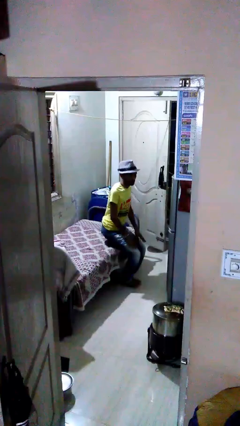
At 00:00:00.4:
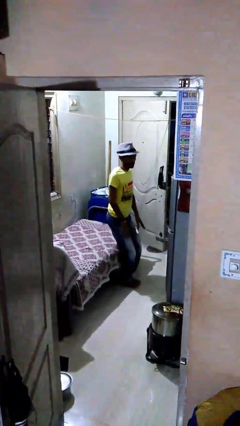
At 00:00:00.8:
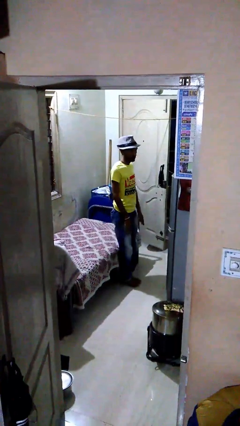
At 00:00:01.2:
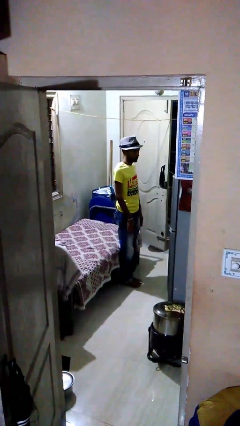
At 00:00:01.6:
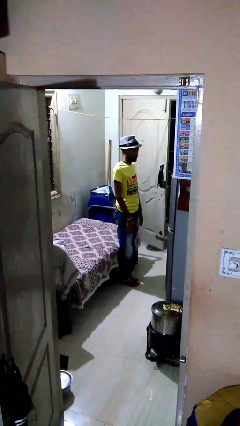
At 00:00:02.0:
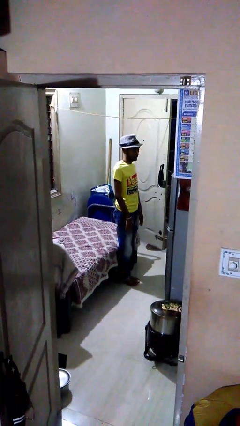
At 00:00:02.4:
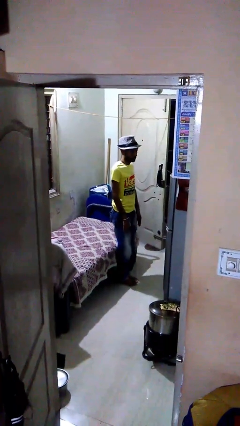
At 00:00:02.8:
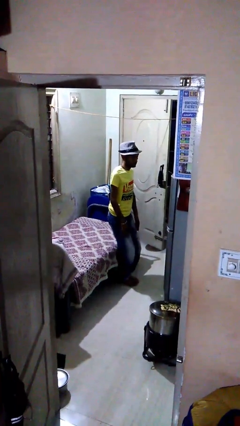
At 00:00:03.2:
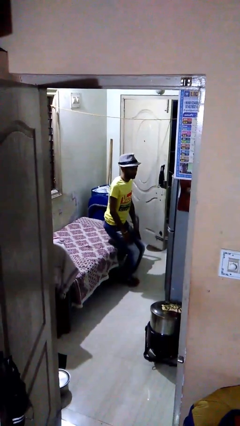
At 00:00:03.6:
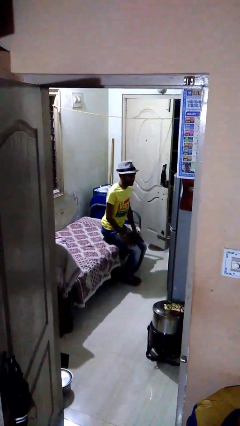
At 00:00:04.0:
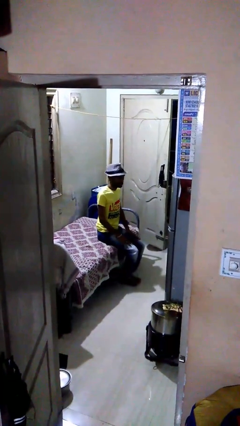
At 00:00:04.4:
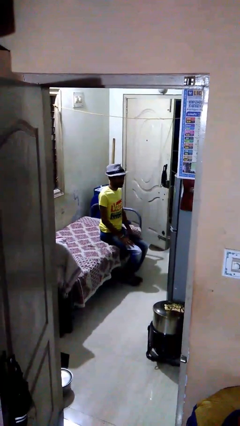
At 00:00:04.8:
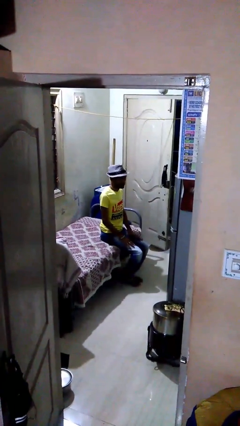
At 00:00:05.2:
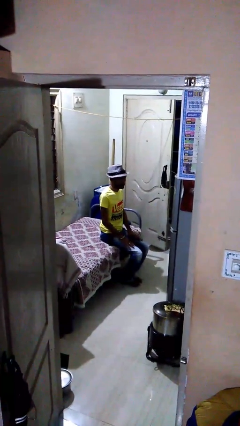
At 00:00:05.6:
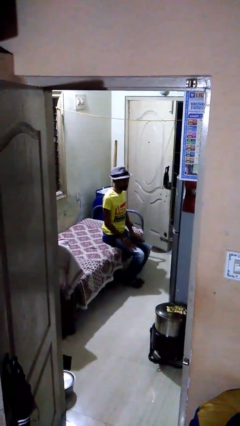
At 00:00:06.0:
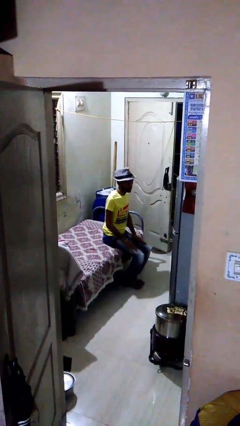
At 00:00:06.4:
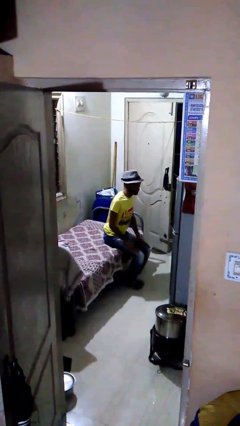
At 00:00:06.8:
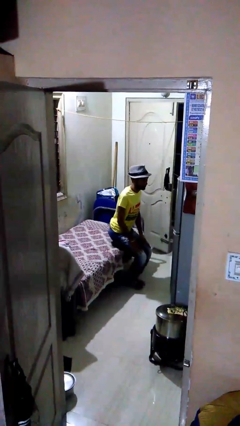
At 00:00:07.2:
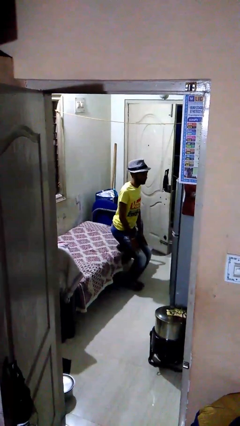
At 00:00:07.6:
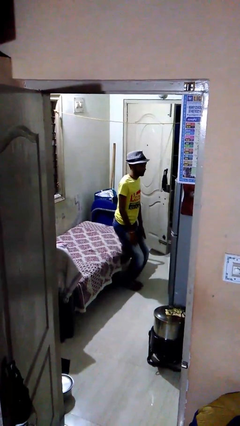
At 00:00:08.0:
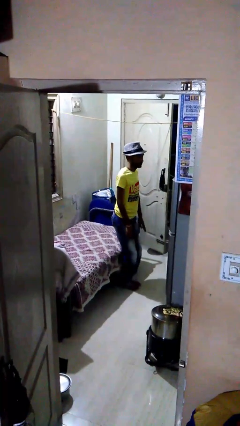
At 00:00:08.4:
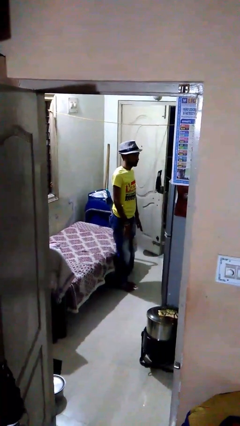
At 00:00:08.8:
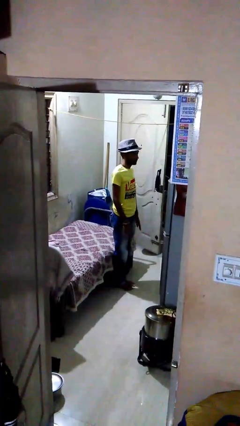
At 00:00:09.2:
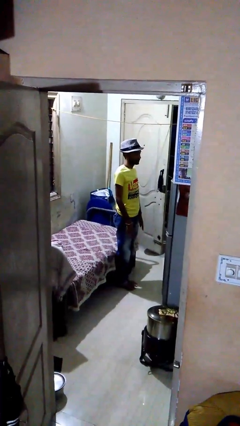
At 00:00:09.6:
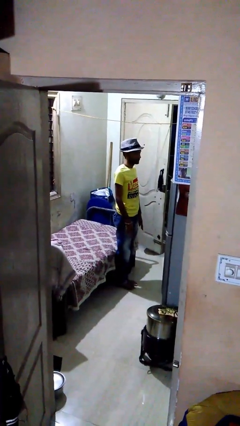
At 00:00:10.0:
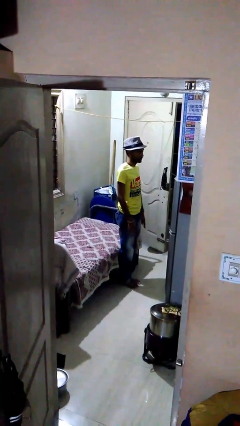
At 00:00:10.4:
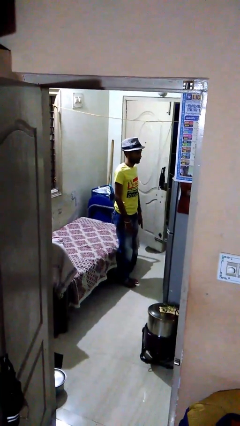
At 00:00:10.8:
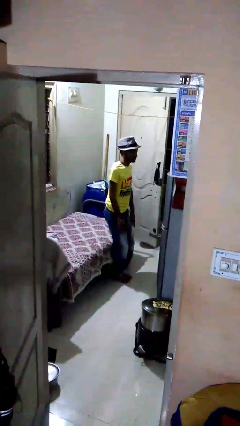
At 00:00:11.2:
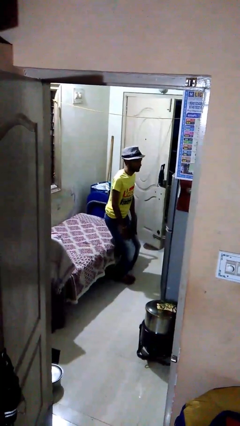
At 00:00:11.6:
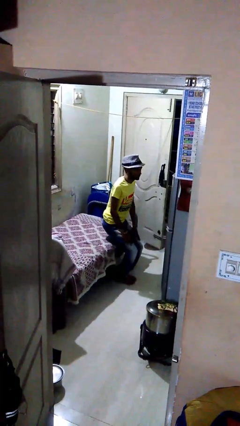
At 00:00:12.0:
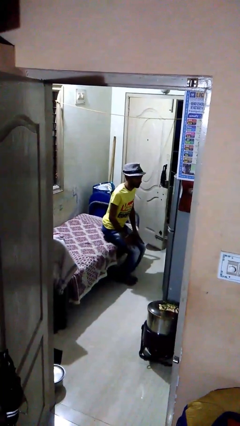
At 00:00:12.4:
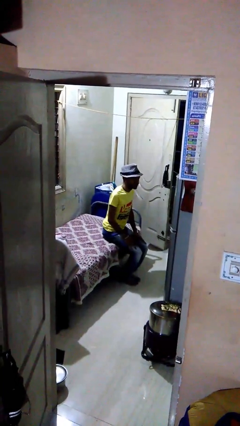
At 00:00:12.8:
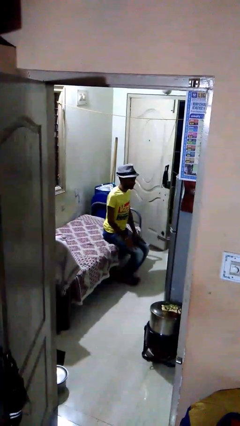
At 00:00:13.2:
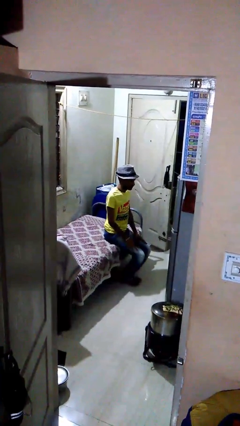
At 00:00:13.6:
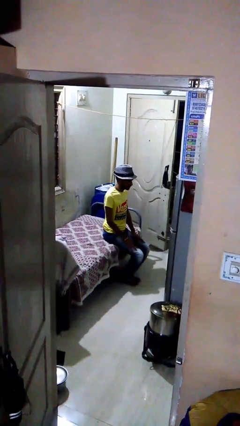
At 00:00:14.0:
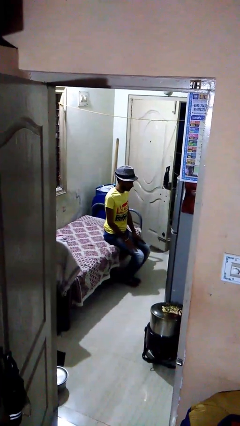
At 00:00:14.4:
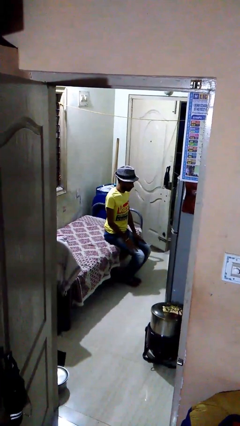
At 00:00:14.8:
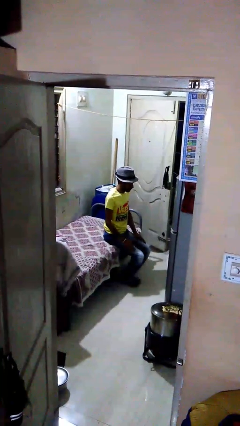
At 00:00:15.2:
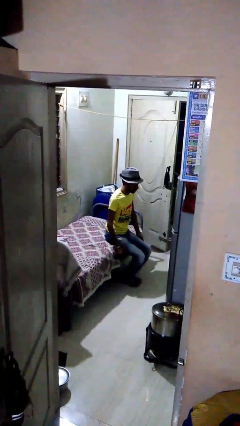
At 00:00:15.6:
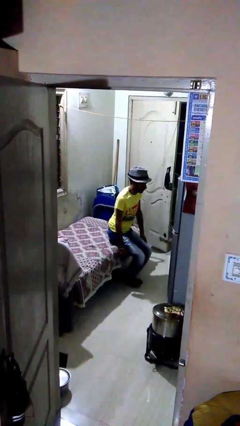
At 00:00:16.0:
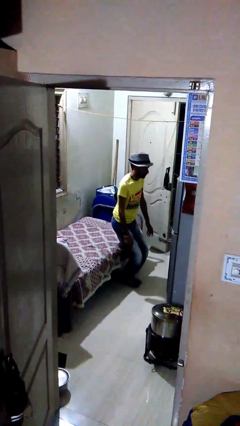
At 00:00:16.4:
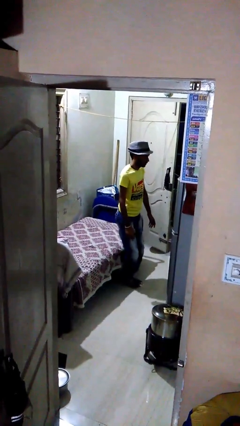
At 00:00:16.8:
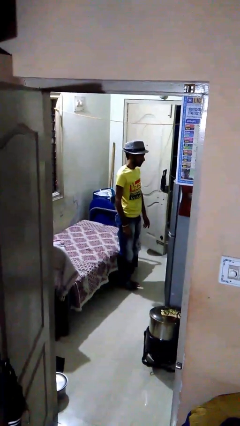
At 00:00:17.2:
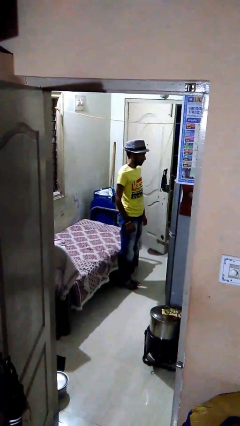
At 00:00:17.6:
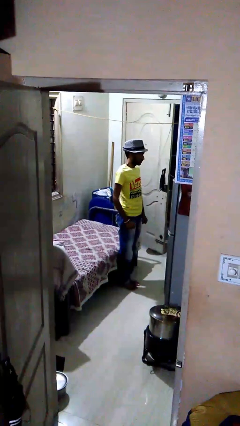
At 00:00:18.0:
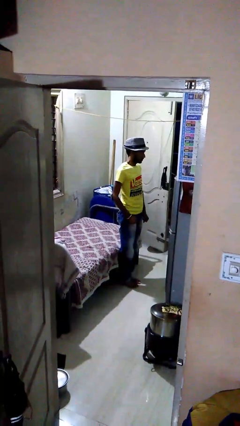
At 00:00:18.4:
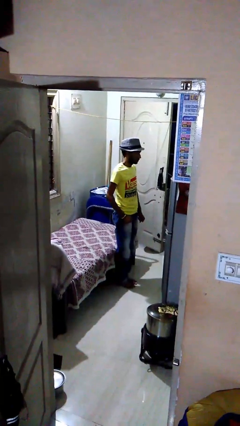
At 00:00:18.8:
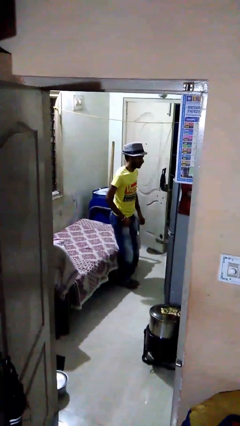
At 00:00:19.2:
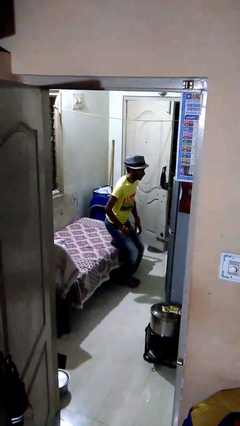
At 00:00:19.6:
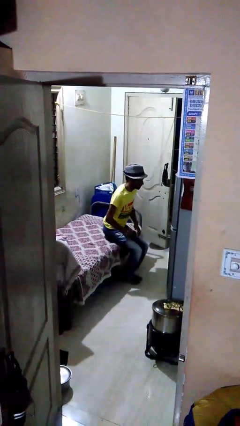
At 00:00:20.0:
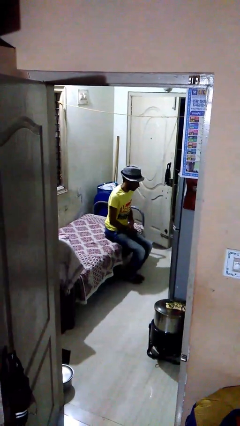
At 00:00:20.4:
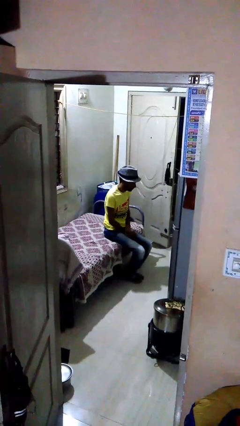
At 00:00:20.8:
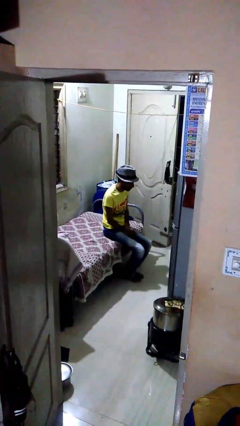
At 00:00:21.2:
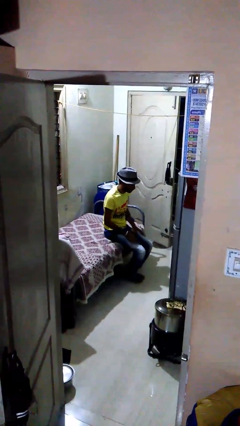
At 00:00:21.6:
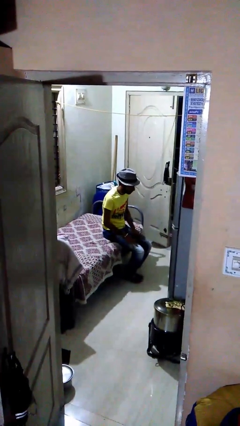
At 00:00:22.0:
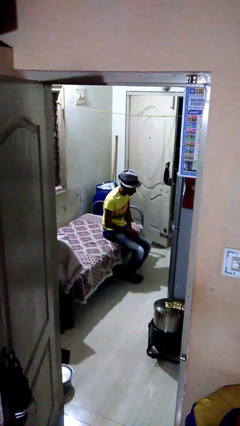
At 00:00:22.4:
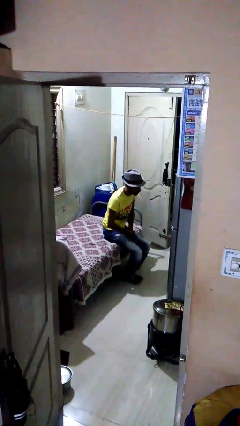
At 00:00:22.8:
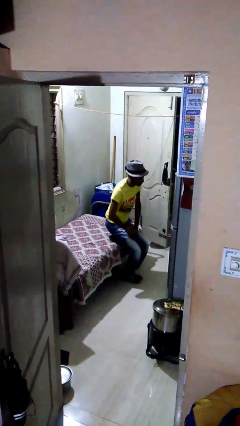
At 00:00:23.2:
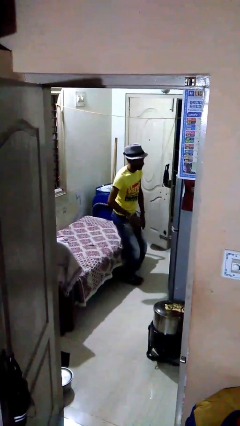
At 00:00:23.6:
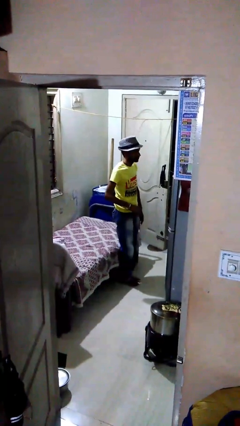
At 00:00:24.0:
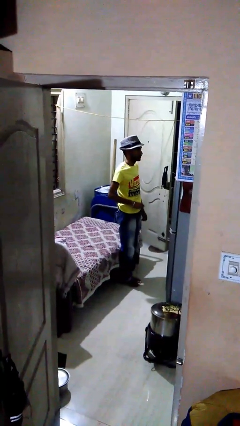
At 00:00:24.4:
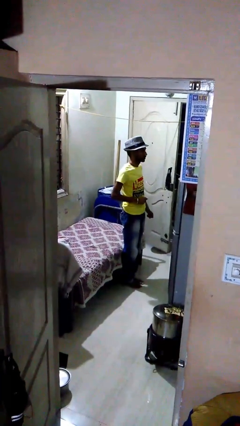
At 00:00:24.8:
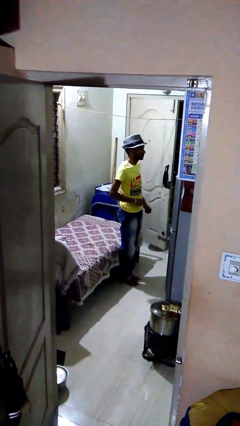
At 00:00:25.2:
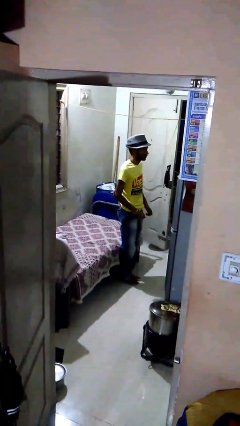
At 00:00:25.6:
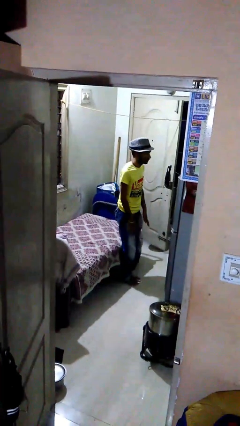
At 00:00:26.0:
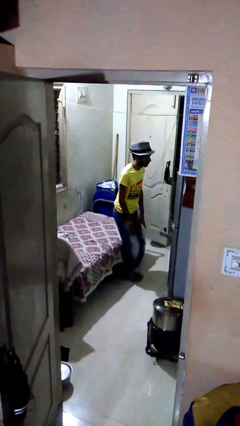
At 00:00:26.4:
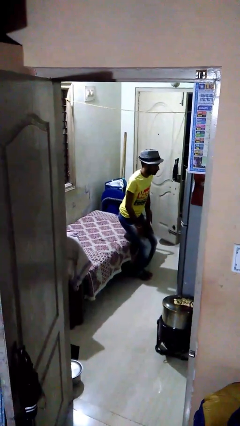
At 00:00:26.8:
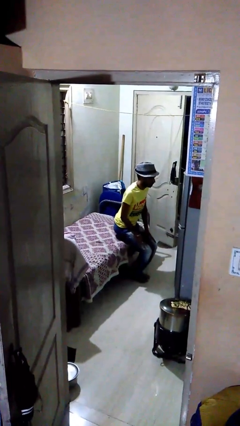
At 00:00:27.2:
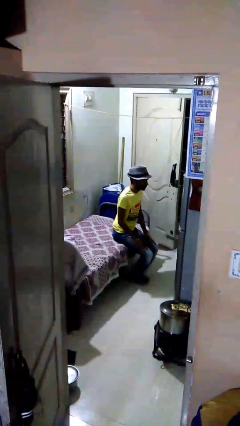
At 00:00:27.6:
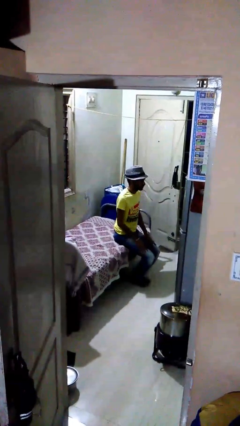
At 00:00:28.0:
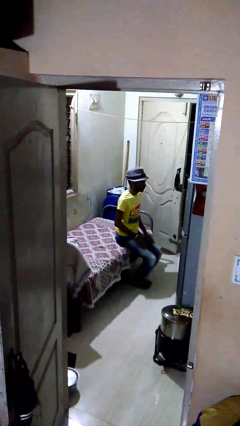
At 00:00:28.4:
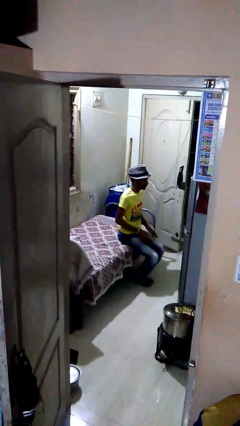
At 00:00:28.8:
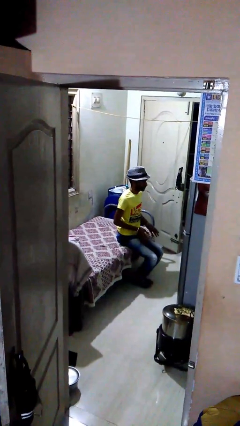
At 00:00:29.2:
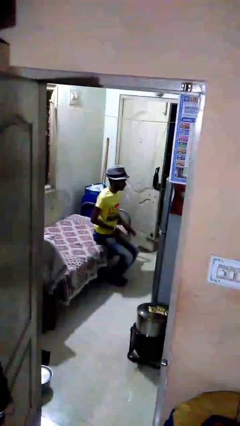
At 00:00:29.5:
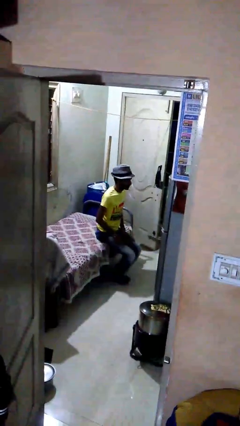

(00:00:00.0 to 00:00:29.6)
person stands up

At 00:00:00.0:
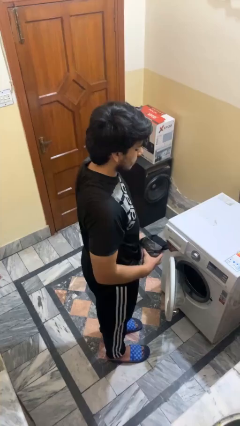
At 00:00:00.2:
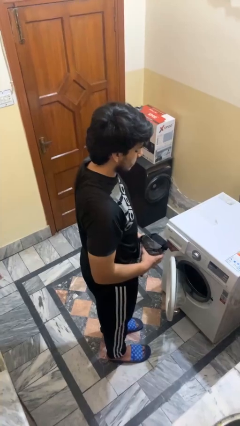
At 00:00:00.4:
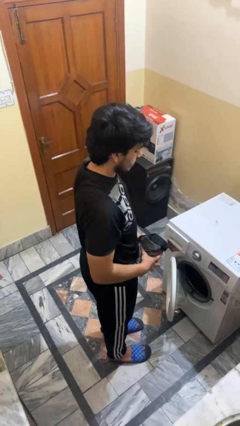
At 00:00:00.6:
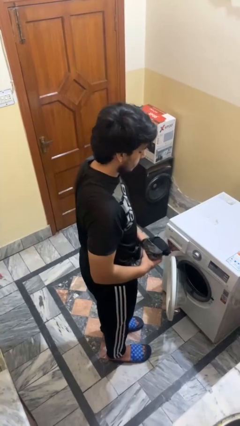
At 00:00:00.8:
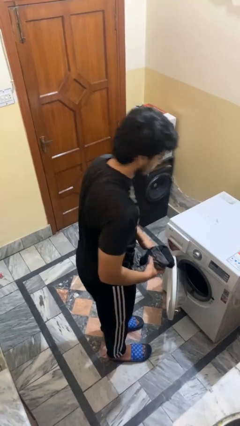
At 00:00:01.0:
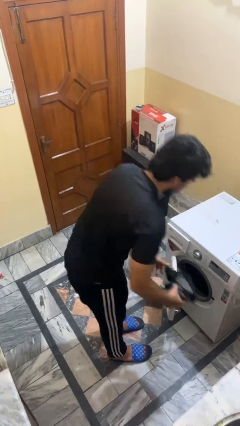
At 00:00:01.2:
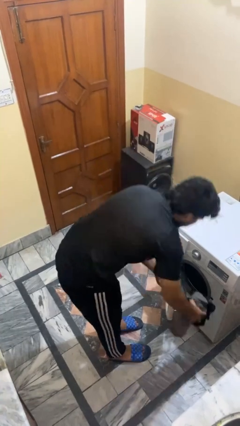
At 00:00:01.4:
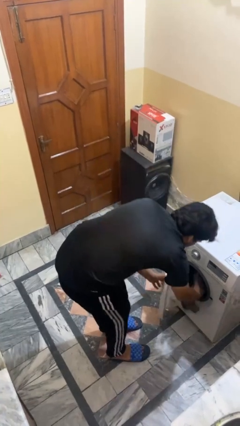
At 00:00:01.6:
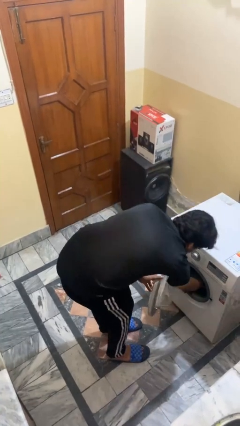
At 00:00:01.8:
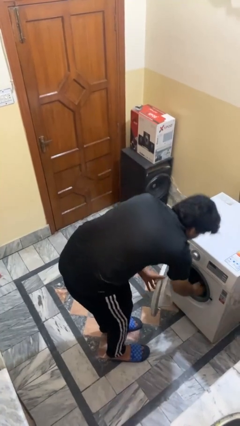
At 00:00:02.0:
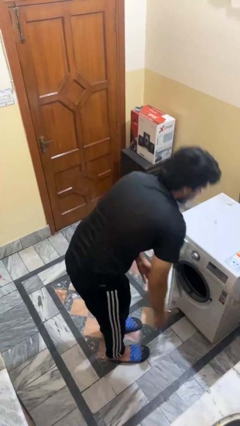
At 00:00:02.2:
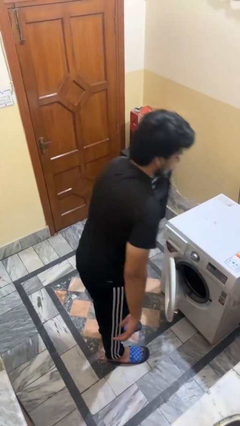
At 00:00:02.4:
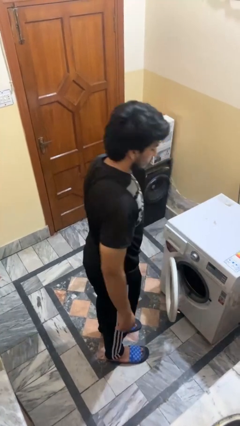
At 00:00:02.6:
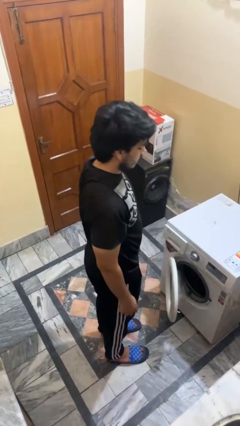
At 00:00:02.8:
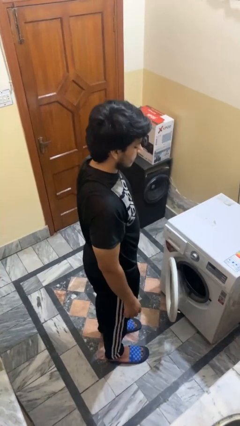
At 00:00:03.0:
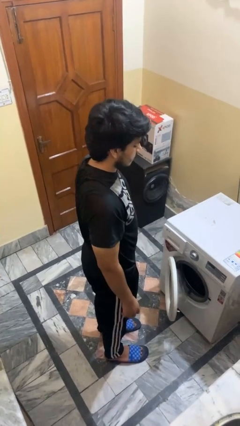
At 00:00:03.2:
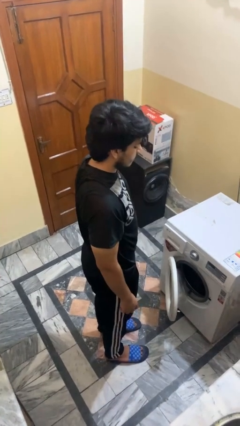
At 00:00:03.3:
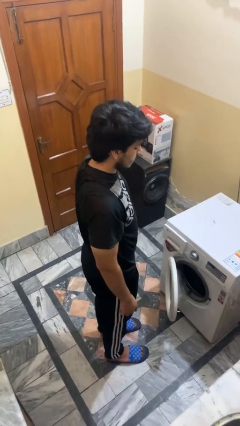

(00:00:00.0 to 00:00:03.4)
person loads dryer
